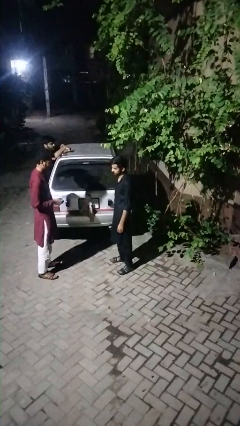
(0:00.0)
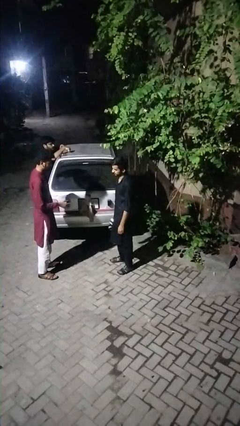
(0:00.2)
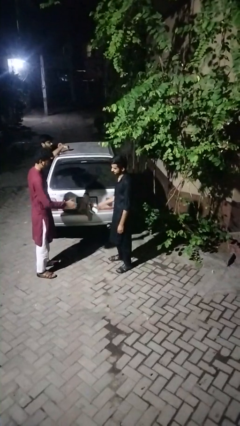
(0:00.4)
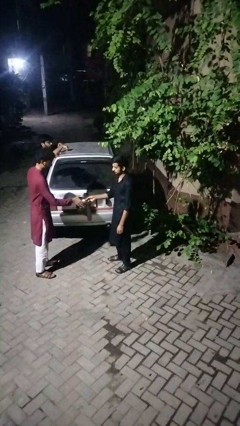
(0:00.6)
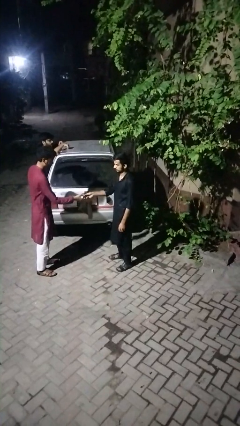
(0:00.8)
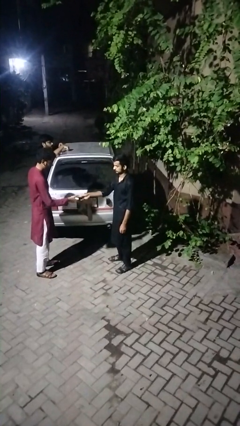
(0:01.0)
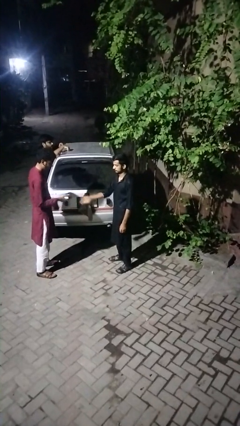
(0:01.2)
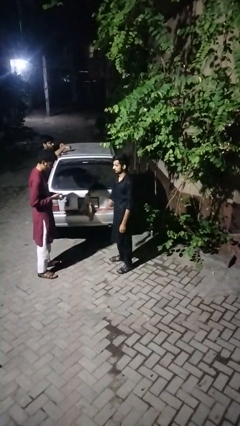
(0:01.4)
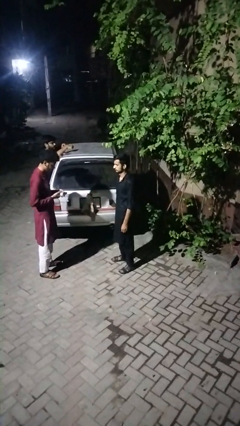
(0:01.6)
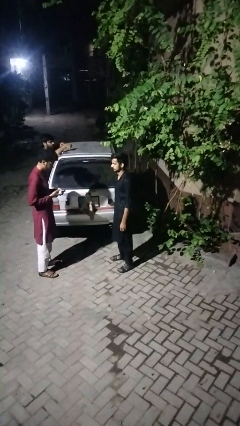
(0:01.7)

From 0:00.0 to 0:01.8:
person transfers object to person

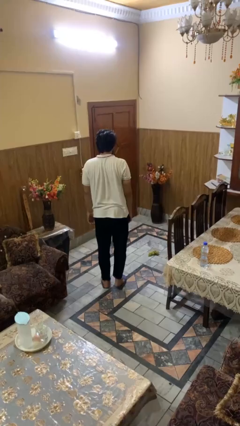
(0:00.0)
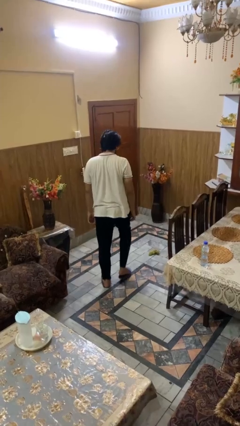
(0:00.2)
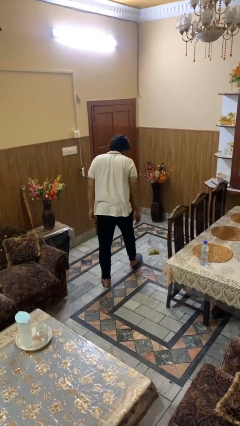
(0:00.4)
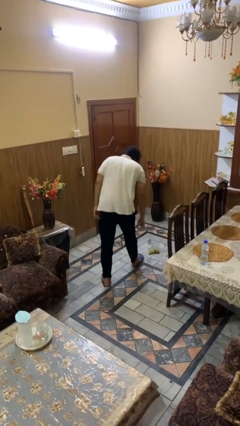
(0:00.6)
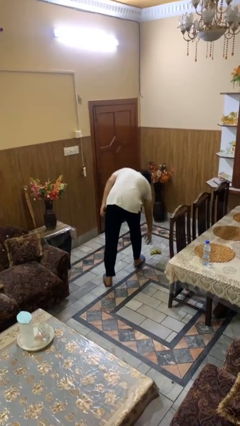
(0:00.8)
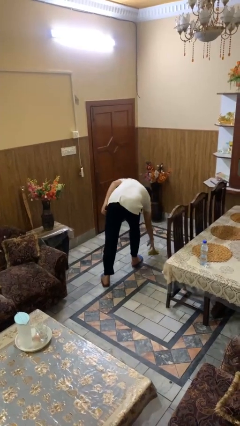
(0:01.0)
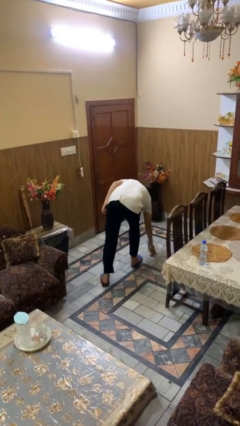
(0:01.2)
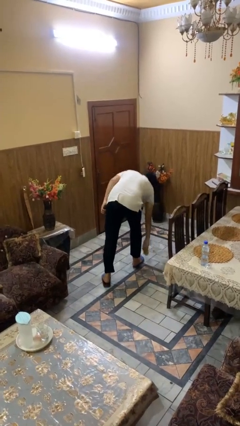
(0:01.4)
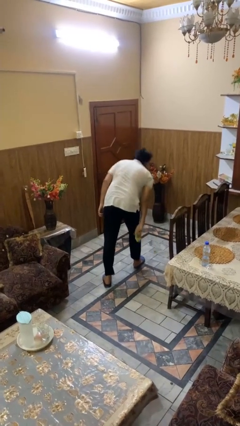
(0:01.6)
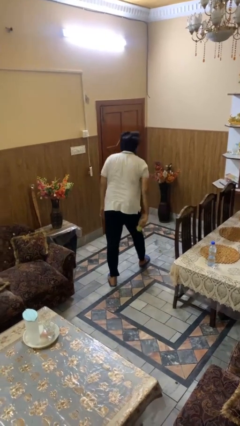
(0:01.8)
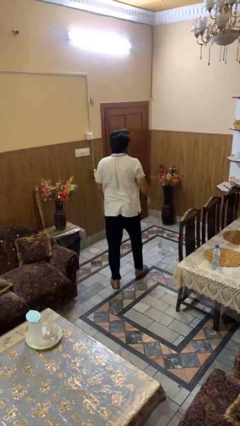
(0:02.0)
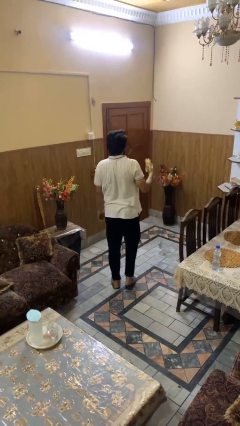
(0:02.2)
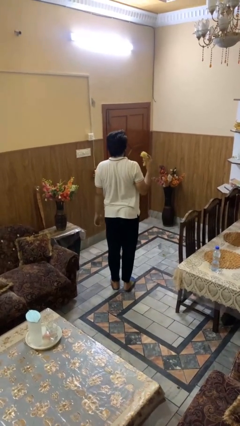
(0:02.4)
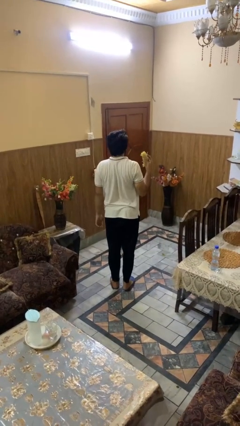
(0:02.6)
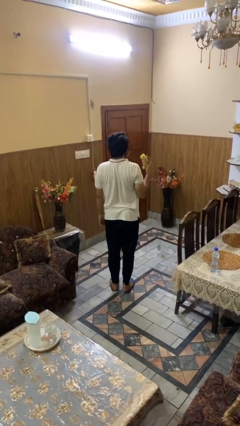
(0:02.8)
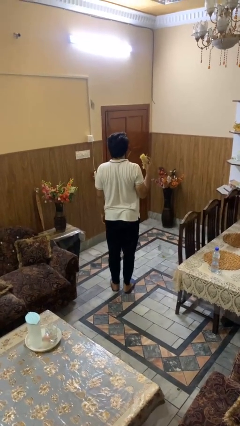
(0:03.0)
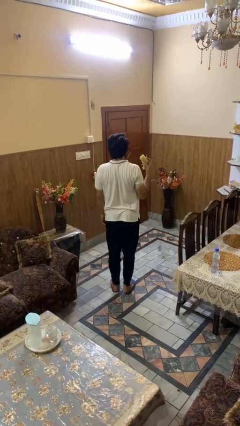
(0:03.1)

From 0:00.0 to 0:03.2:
person picks up object from floor

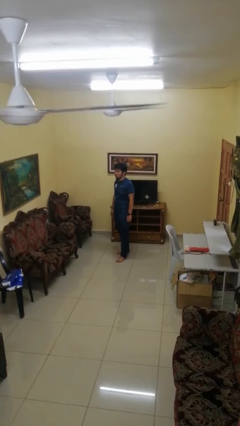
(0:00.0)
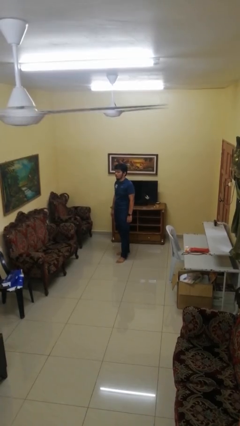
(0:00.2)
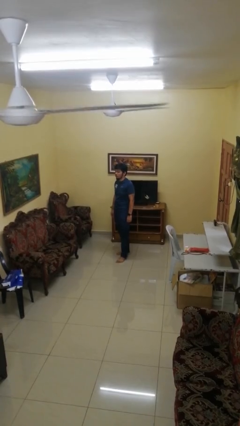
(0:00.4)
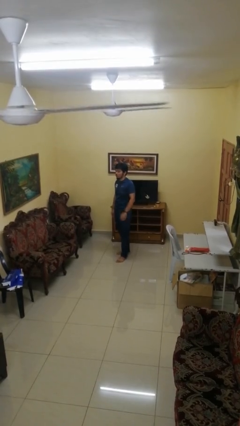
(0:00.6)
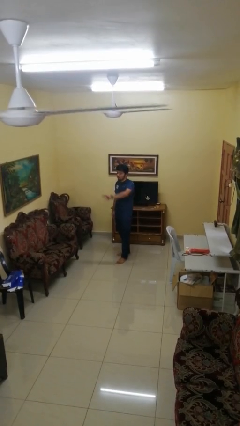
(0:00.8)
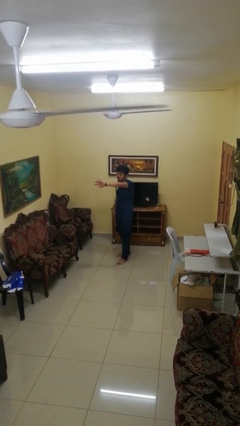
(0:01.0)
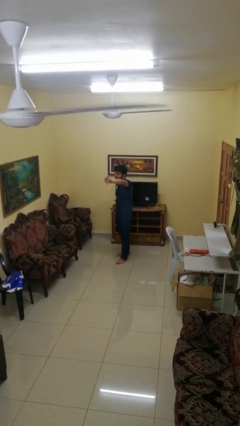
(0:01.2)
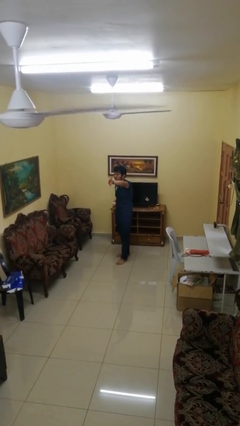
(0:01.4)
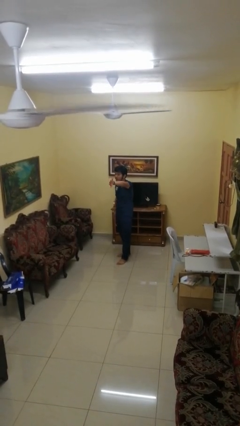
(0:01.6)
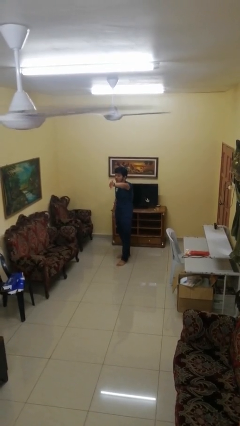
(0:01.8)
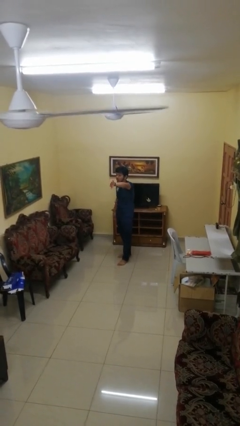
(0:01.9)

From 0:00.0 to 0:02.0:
person gestures swipe left

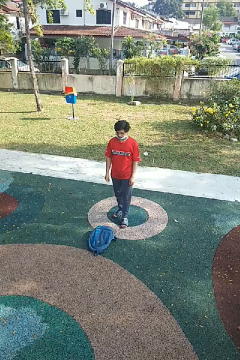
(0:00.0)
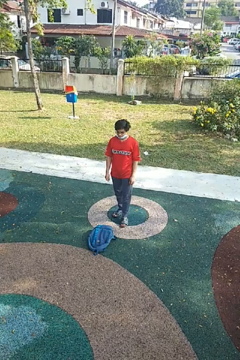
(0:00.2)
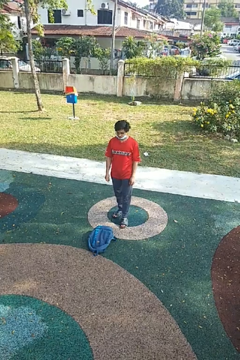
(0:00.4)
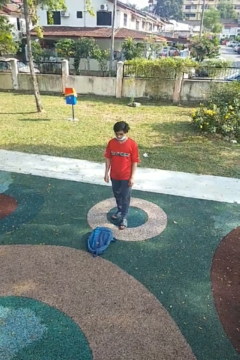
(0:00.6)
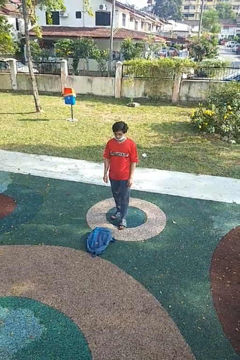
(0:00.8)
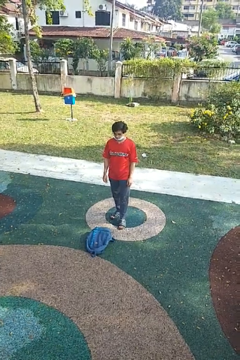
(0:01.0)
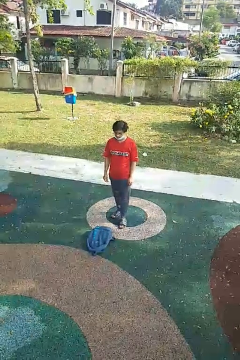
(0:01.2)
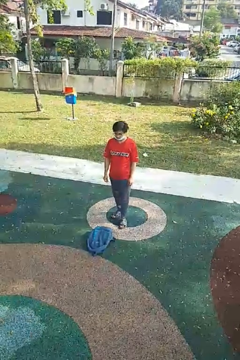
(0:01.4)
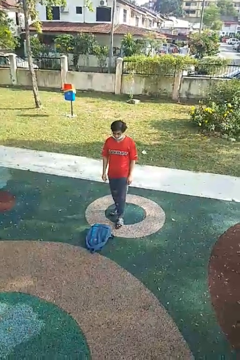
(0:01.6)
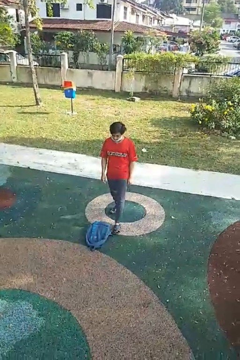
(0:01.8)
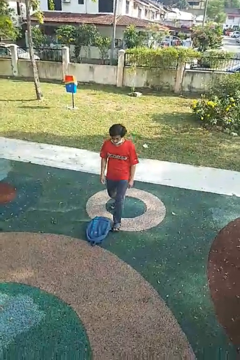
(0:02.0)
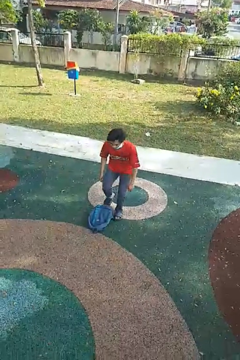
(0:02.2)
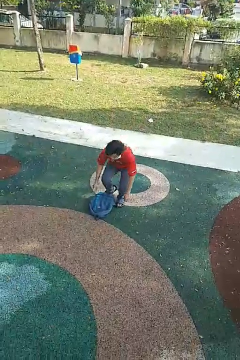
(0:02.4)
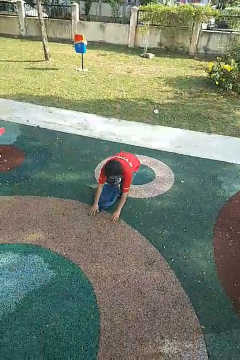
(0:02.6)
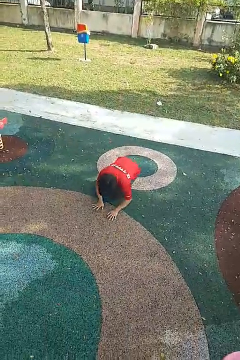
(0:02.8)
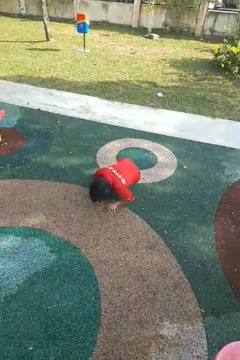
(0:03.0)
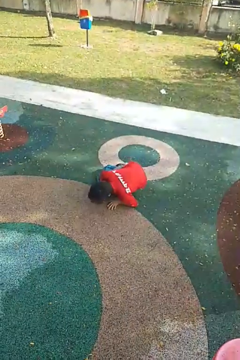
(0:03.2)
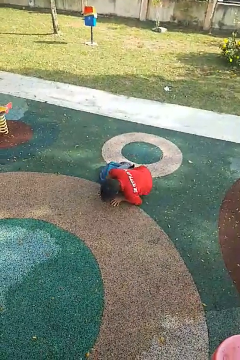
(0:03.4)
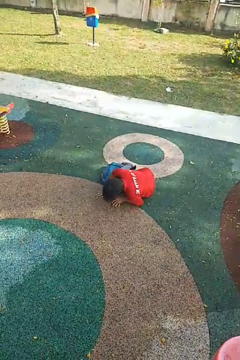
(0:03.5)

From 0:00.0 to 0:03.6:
person trips on object on floor

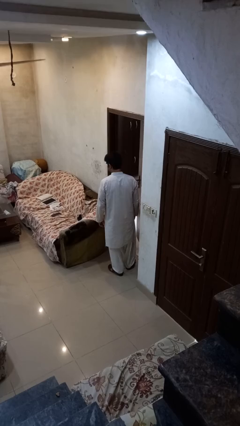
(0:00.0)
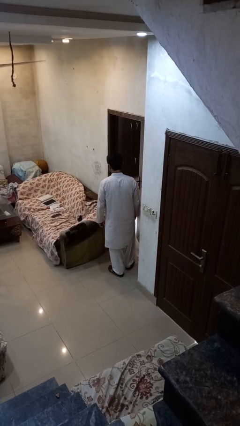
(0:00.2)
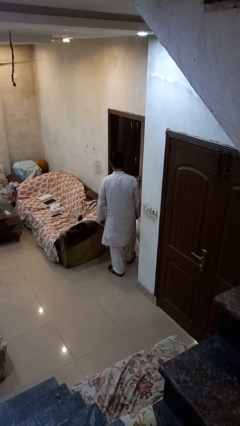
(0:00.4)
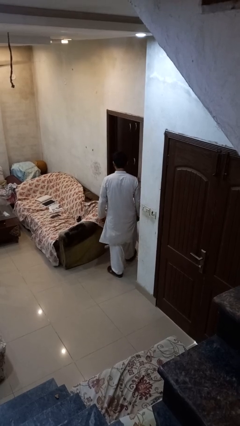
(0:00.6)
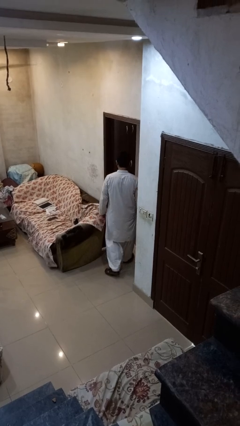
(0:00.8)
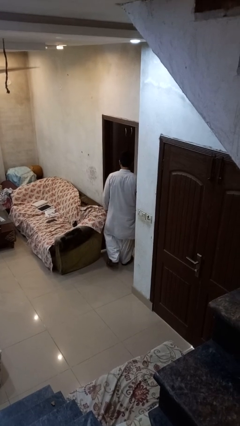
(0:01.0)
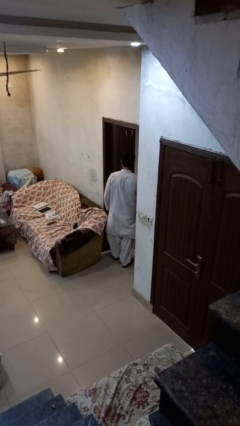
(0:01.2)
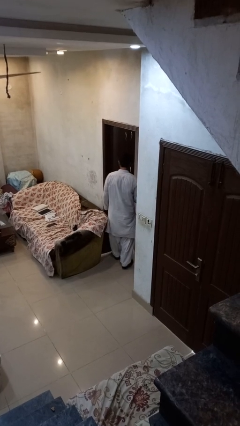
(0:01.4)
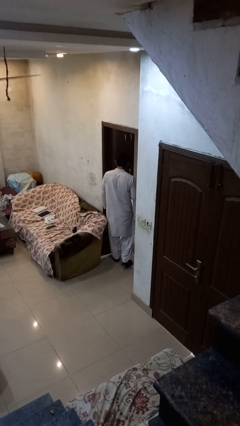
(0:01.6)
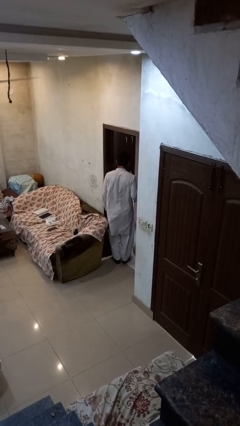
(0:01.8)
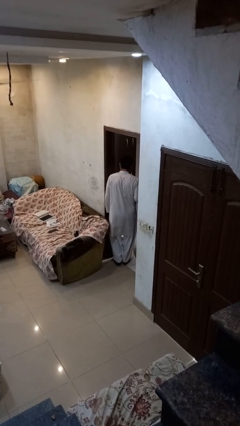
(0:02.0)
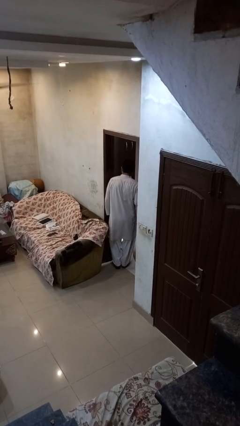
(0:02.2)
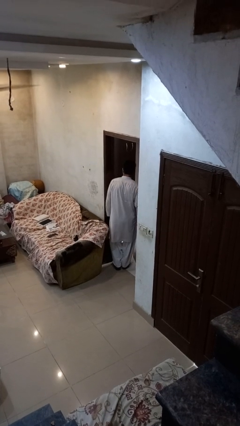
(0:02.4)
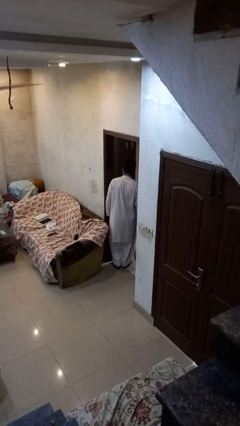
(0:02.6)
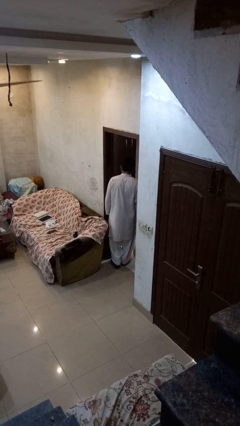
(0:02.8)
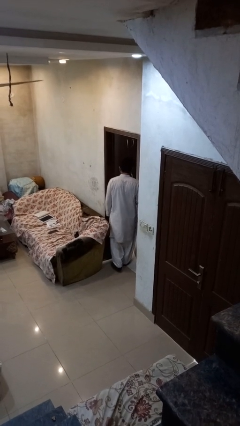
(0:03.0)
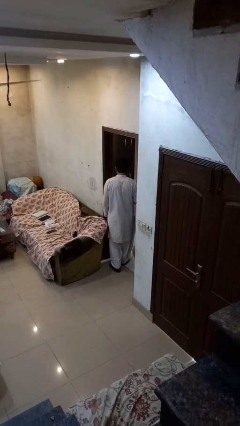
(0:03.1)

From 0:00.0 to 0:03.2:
person bumps into wall

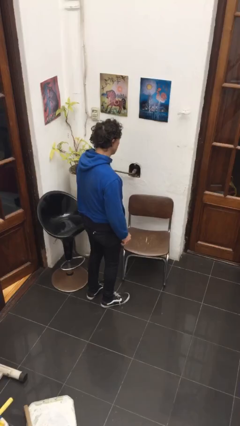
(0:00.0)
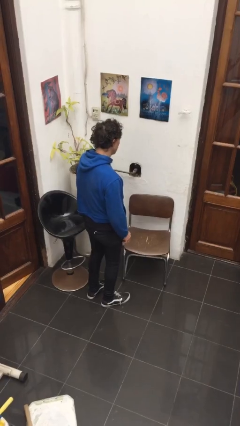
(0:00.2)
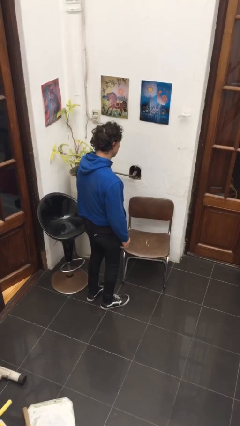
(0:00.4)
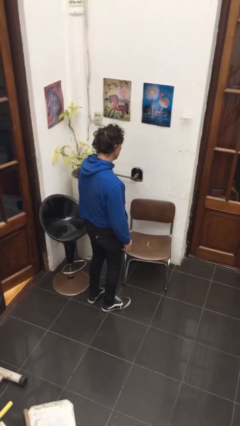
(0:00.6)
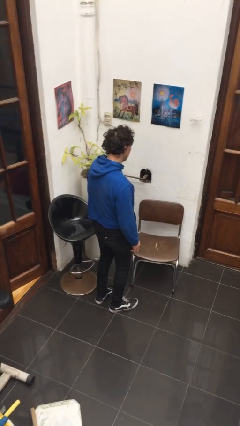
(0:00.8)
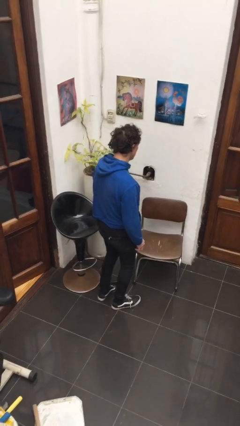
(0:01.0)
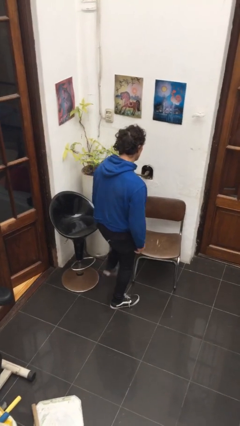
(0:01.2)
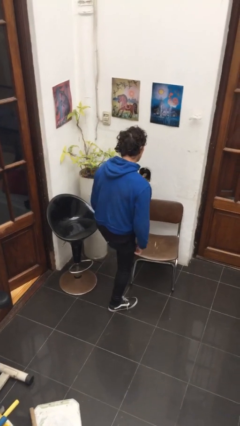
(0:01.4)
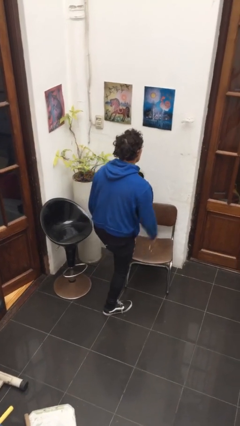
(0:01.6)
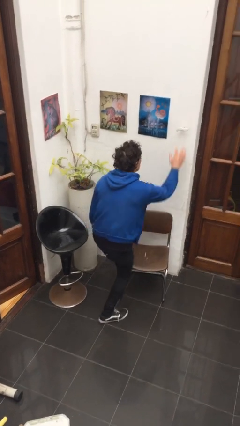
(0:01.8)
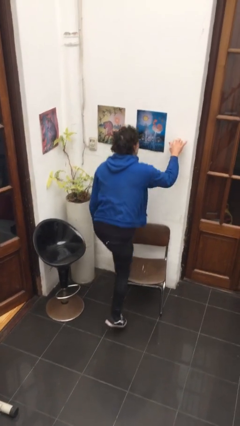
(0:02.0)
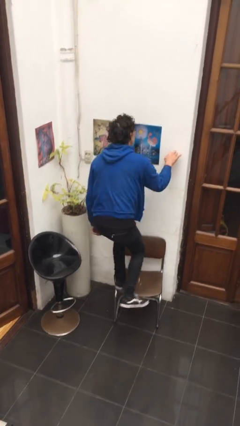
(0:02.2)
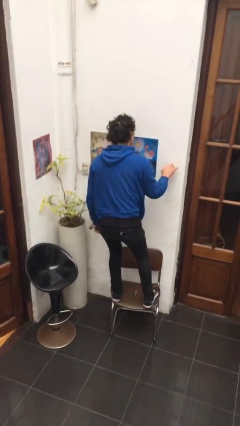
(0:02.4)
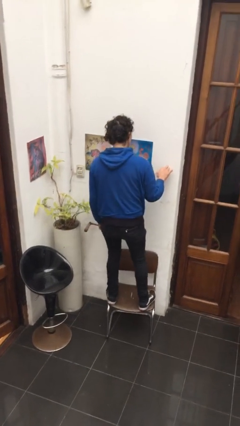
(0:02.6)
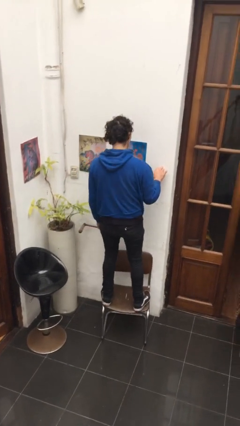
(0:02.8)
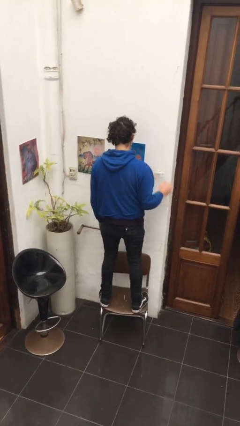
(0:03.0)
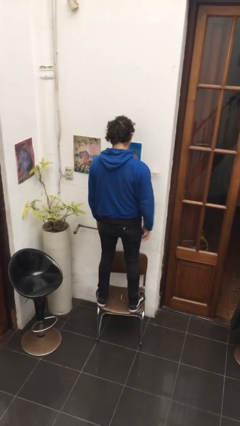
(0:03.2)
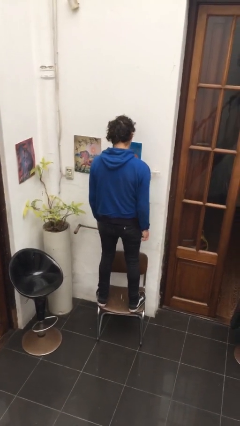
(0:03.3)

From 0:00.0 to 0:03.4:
person climbs on chair

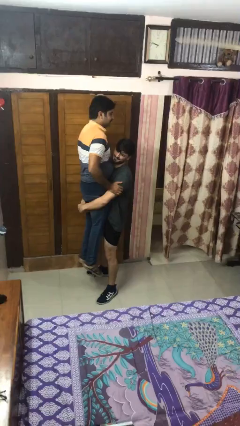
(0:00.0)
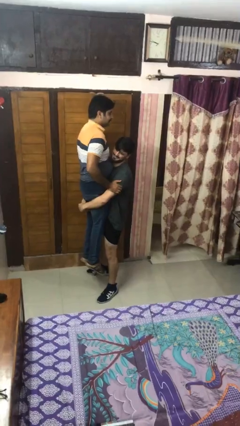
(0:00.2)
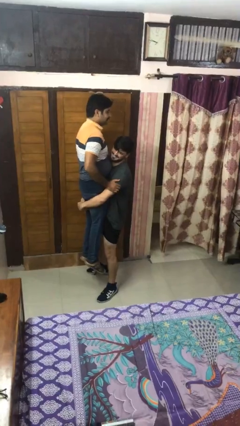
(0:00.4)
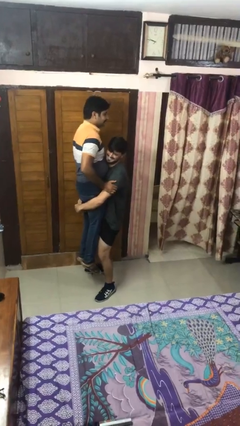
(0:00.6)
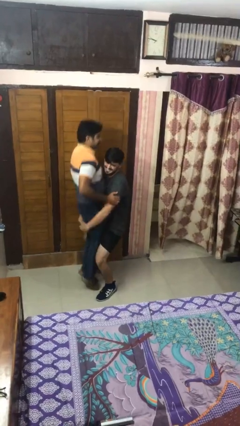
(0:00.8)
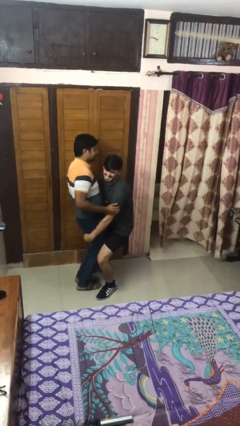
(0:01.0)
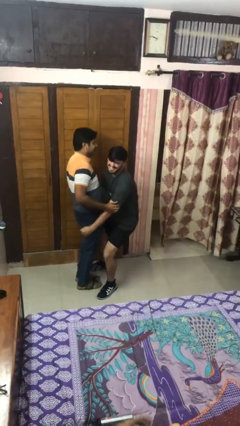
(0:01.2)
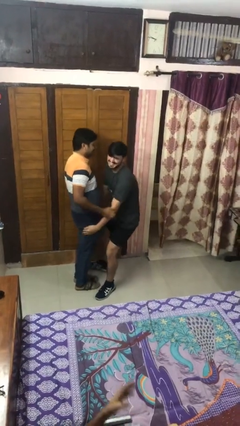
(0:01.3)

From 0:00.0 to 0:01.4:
person puts down person
